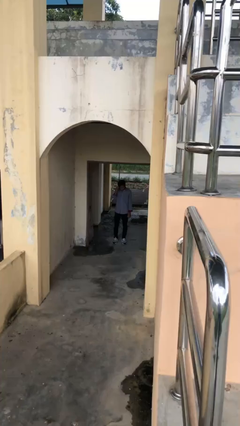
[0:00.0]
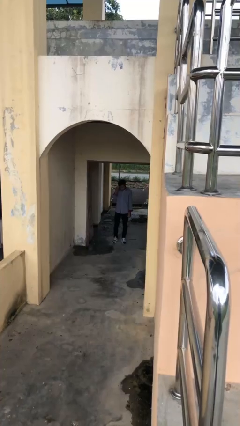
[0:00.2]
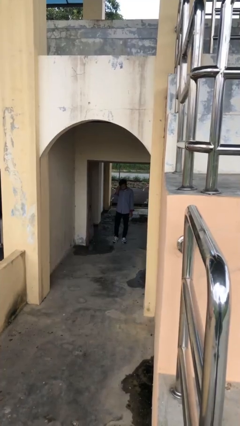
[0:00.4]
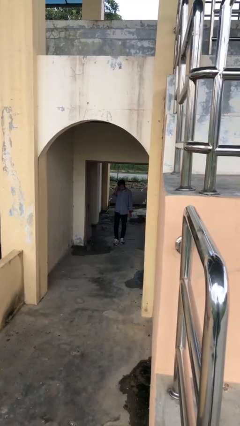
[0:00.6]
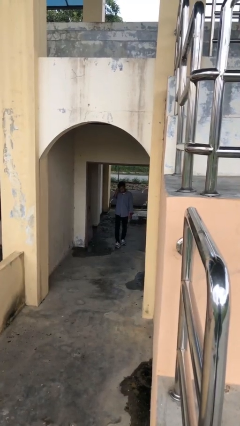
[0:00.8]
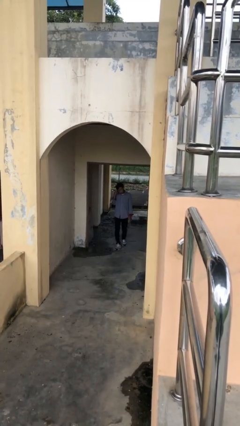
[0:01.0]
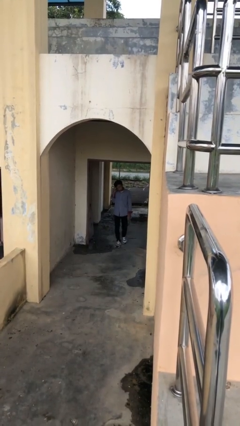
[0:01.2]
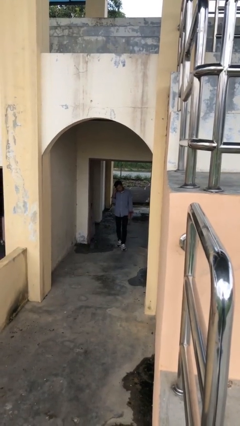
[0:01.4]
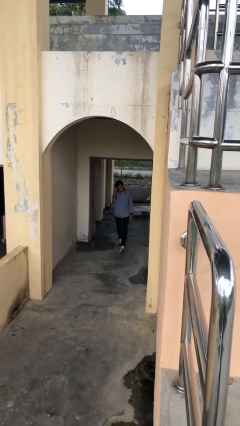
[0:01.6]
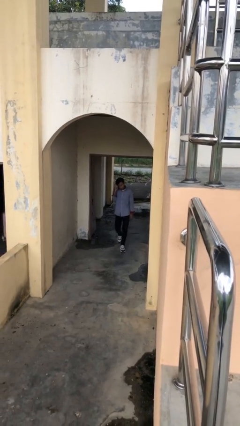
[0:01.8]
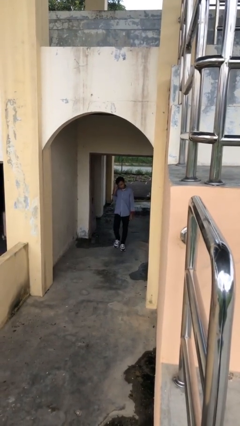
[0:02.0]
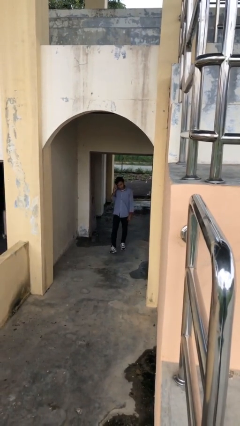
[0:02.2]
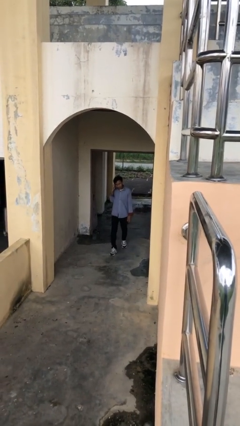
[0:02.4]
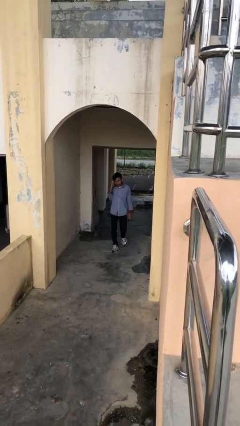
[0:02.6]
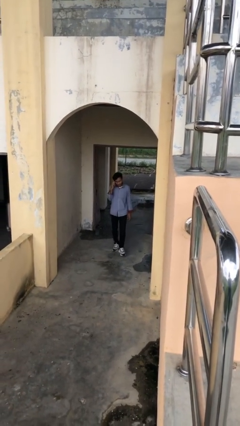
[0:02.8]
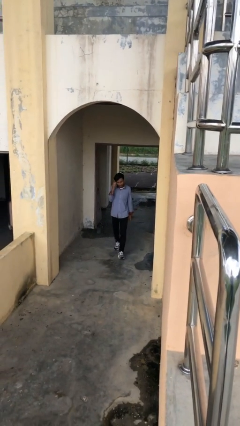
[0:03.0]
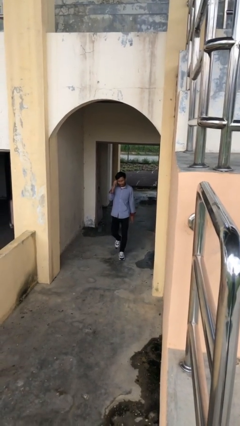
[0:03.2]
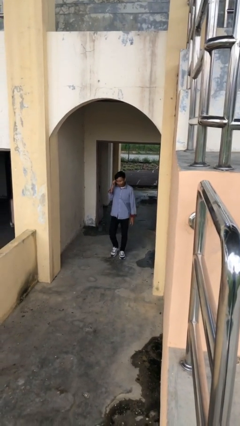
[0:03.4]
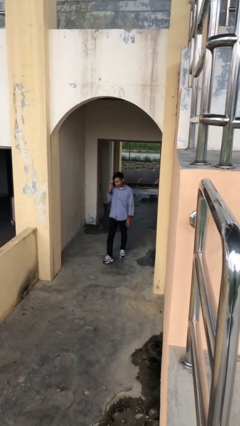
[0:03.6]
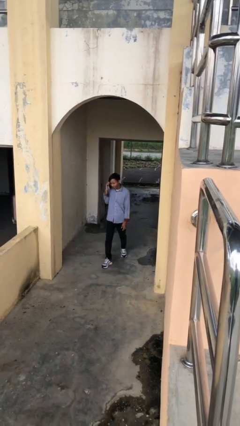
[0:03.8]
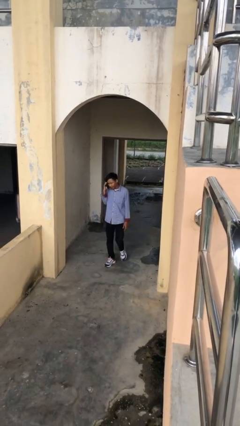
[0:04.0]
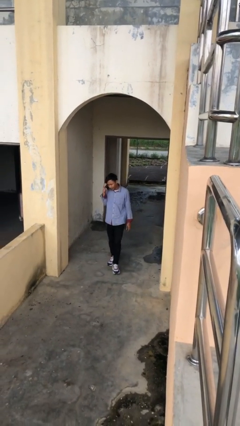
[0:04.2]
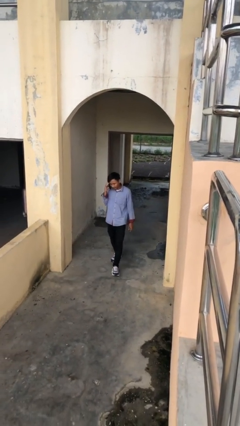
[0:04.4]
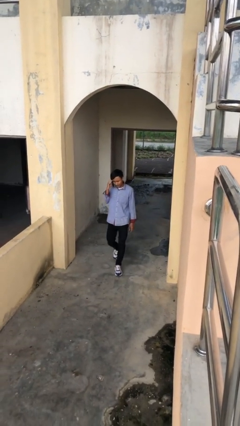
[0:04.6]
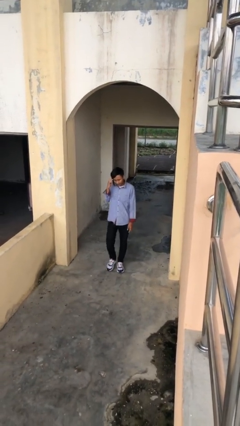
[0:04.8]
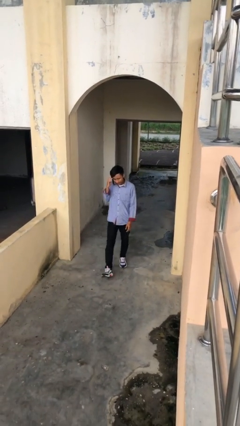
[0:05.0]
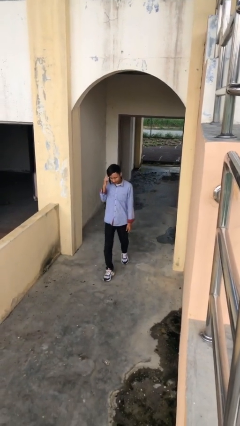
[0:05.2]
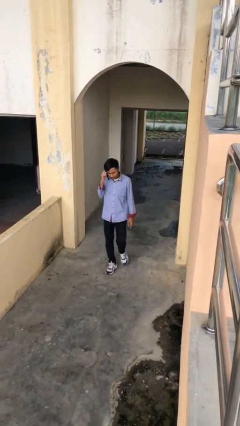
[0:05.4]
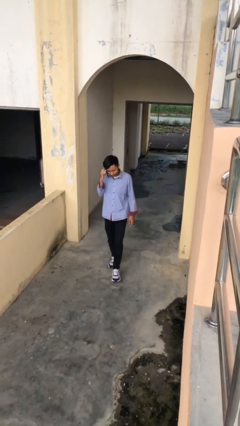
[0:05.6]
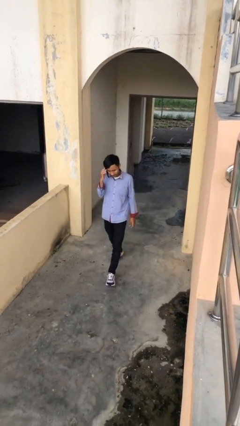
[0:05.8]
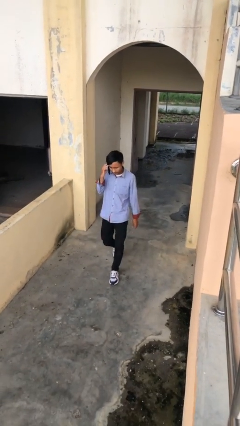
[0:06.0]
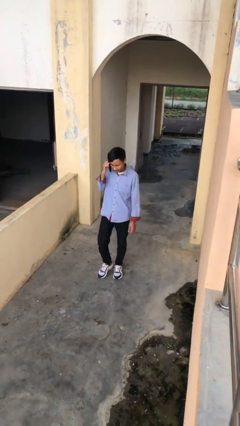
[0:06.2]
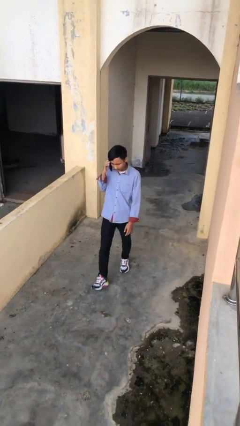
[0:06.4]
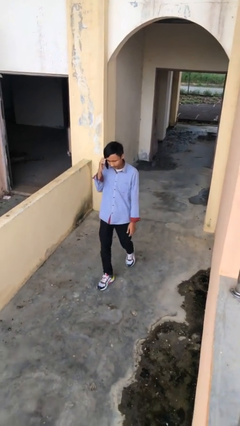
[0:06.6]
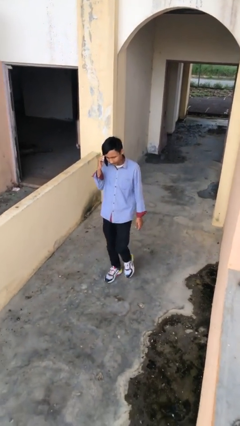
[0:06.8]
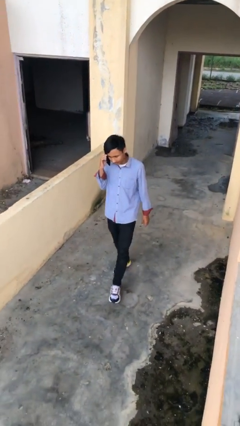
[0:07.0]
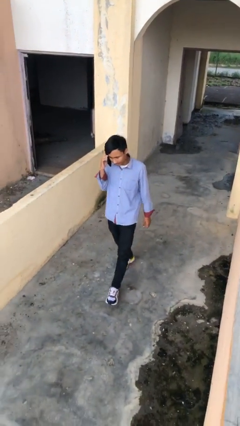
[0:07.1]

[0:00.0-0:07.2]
person enters scene through structure

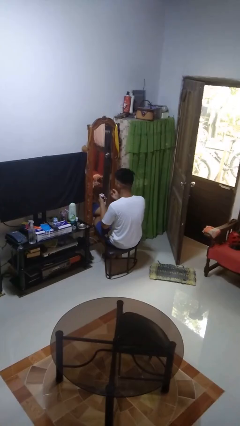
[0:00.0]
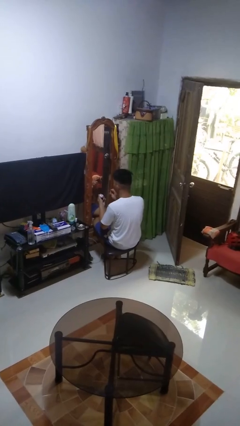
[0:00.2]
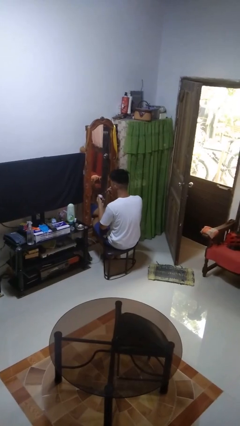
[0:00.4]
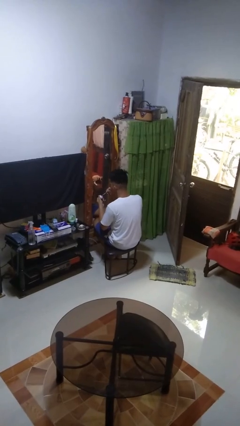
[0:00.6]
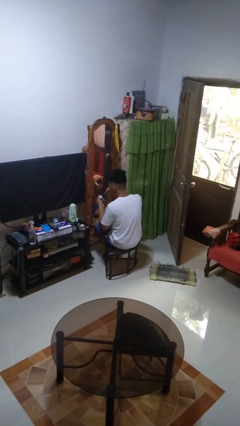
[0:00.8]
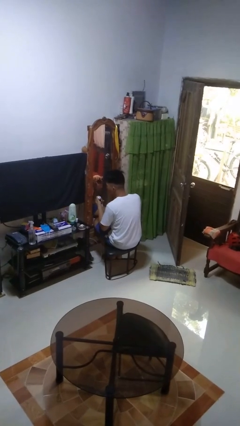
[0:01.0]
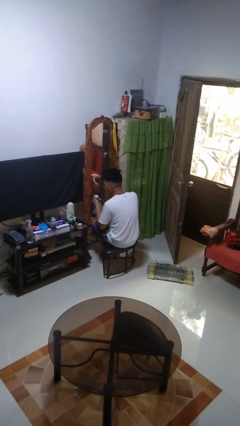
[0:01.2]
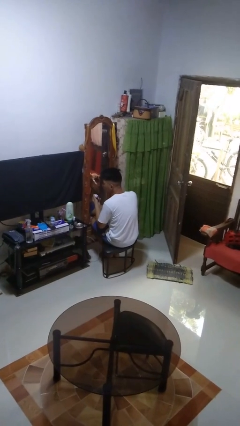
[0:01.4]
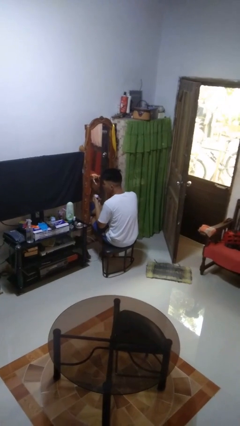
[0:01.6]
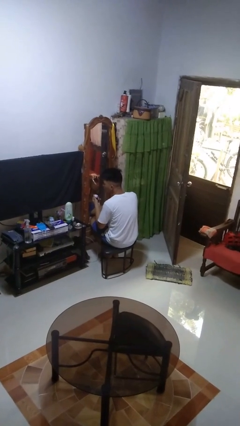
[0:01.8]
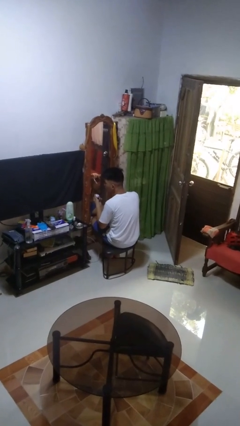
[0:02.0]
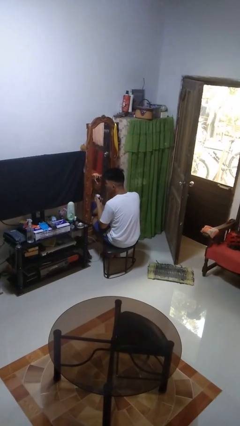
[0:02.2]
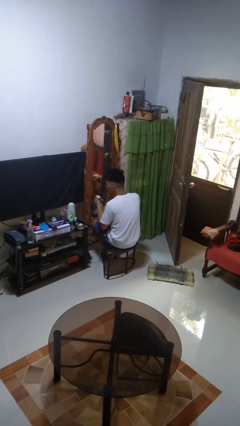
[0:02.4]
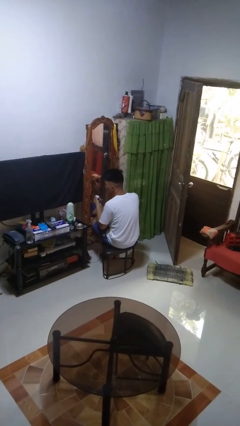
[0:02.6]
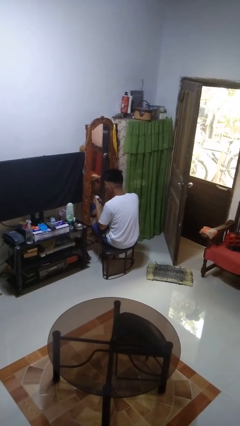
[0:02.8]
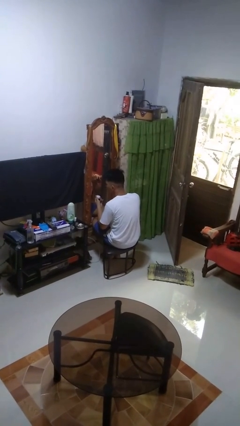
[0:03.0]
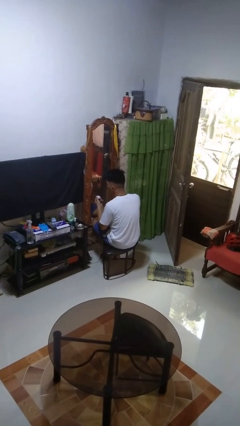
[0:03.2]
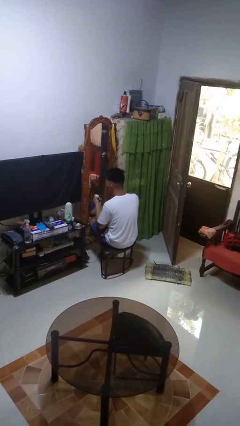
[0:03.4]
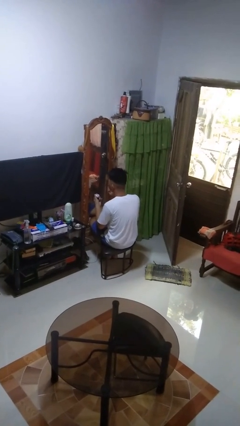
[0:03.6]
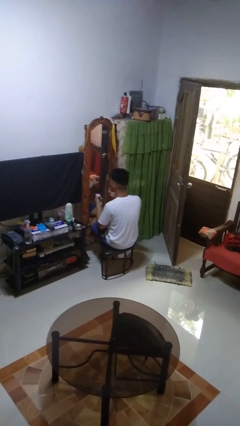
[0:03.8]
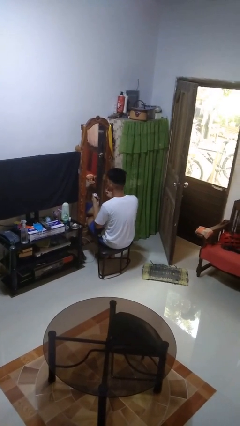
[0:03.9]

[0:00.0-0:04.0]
person applies eye makeup

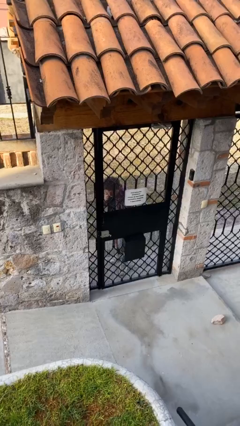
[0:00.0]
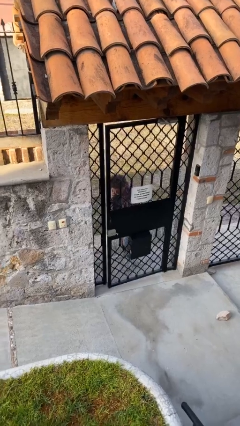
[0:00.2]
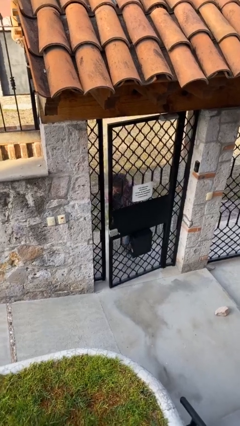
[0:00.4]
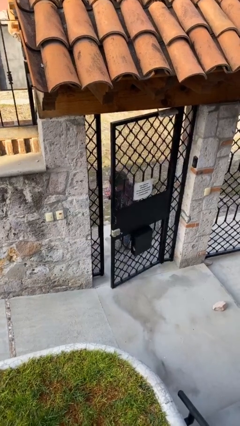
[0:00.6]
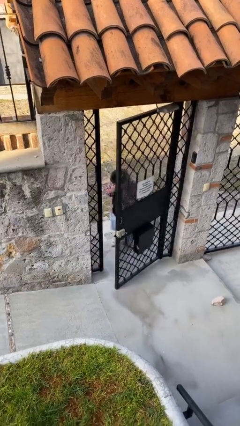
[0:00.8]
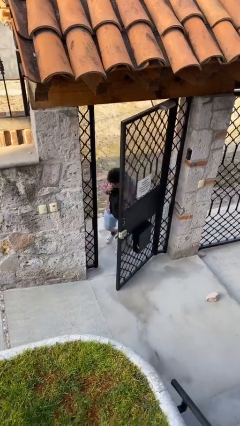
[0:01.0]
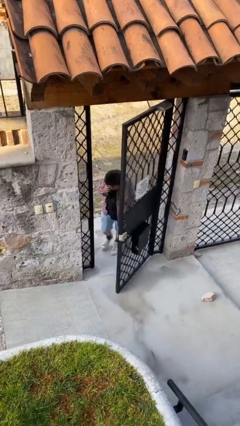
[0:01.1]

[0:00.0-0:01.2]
person opens facility door

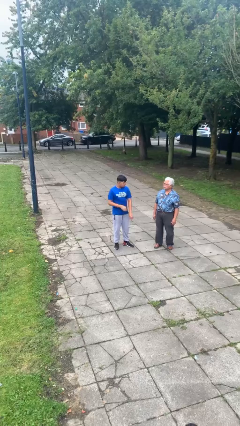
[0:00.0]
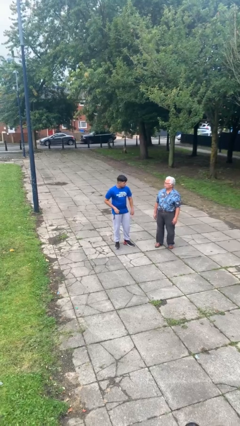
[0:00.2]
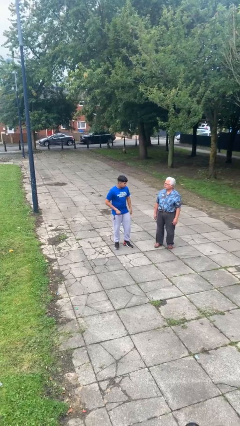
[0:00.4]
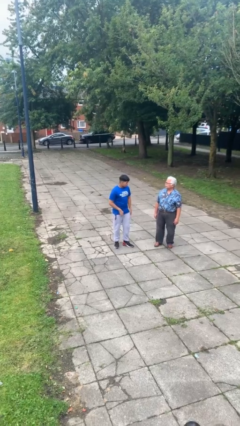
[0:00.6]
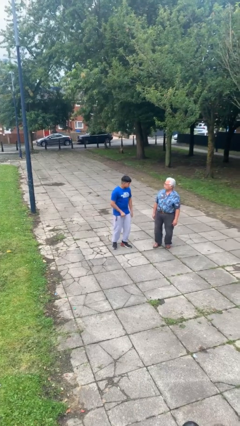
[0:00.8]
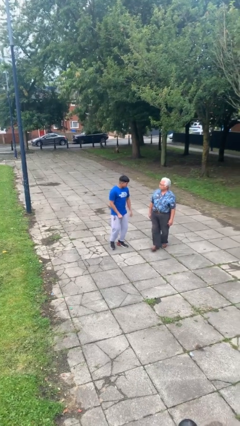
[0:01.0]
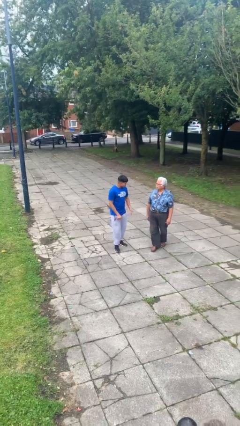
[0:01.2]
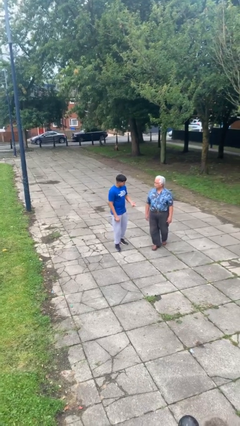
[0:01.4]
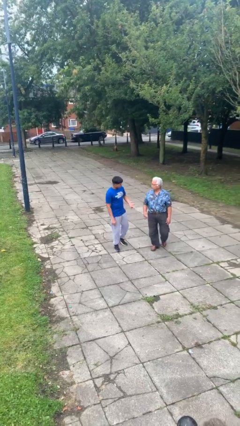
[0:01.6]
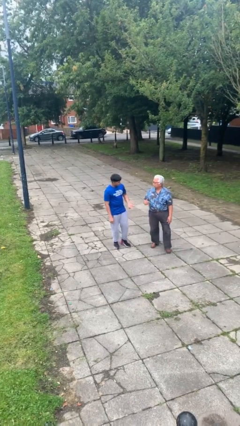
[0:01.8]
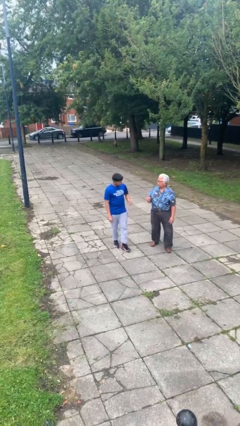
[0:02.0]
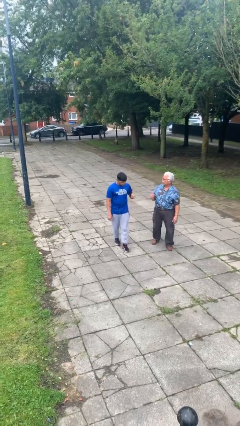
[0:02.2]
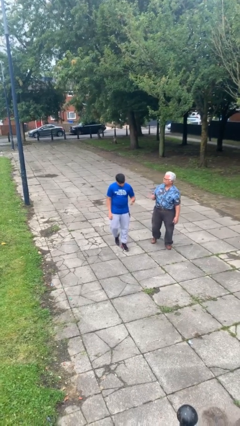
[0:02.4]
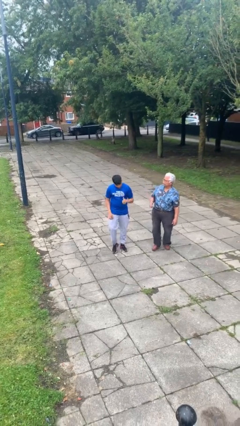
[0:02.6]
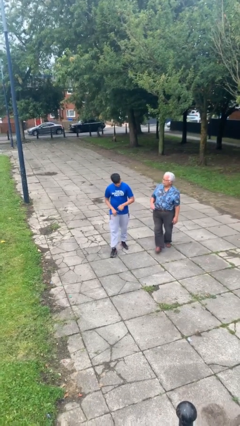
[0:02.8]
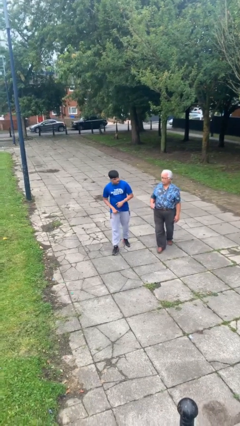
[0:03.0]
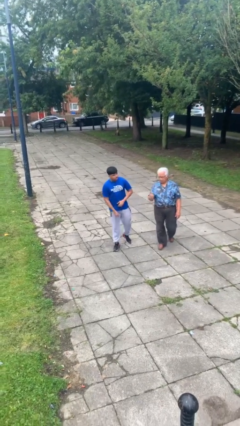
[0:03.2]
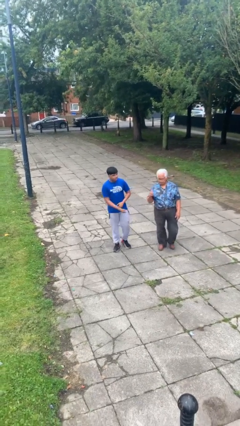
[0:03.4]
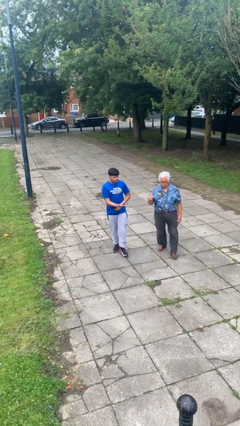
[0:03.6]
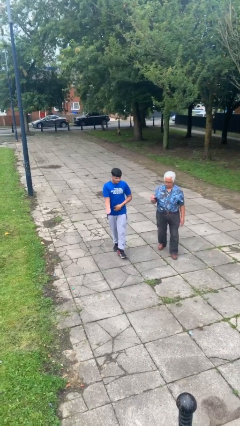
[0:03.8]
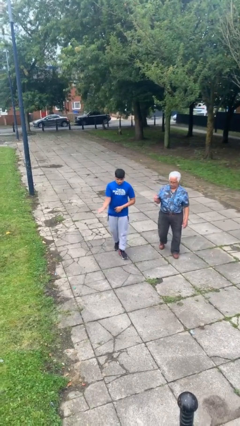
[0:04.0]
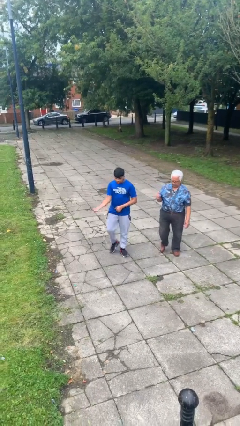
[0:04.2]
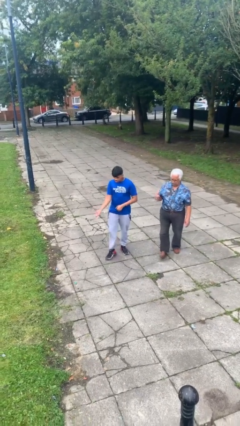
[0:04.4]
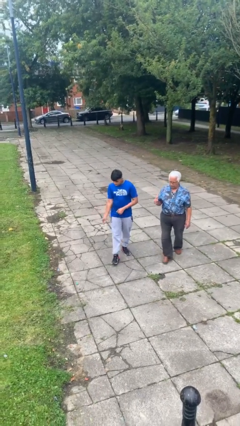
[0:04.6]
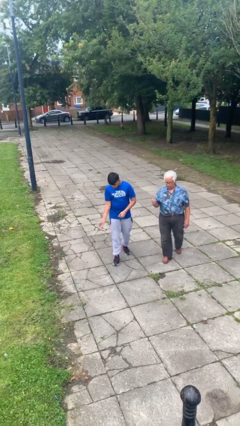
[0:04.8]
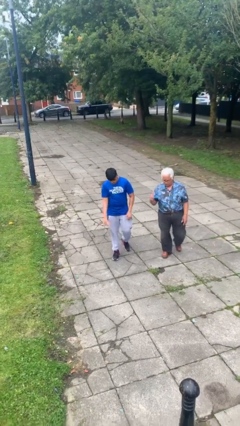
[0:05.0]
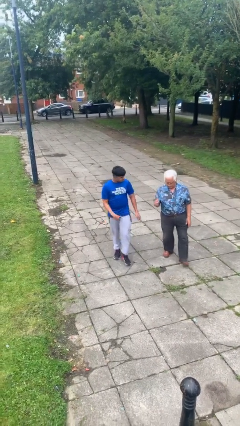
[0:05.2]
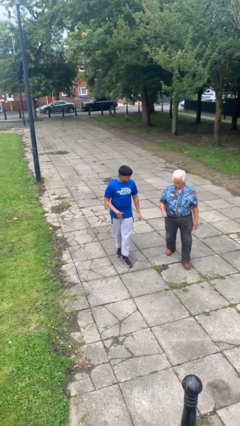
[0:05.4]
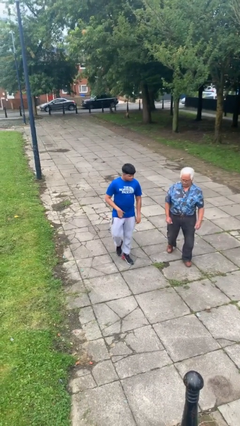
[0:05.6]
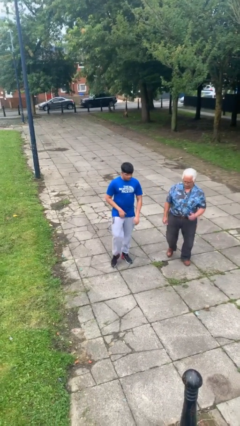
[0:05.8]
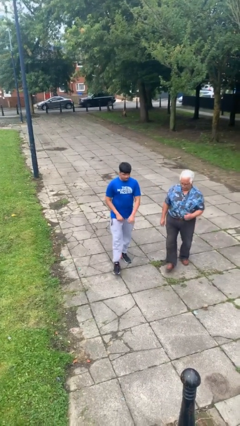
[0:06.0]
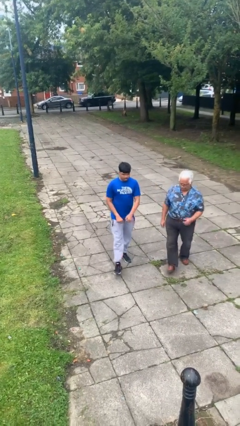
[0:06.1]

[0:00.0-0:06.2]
person talks to person
